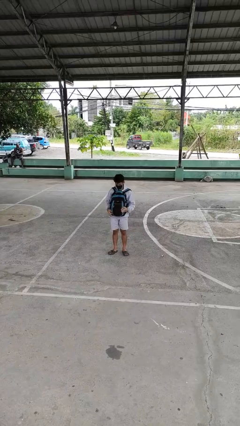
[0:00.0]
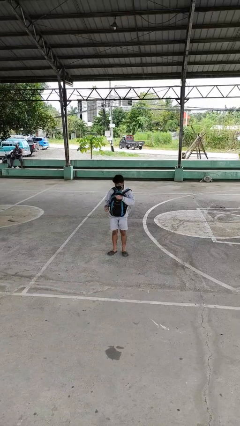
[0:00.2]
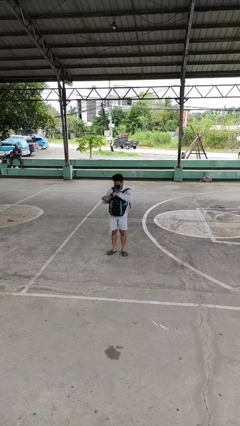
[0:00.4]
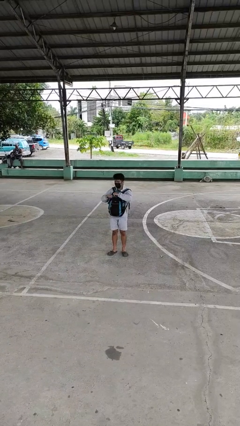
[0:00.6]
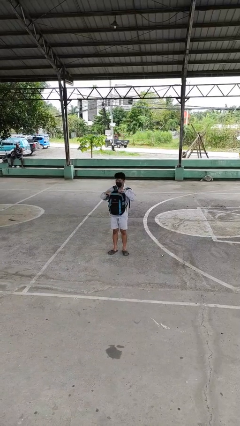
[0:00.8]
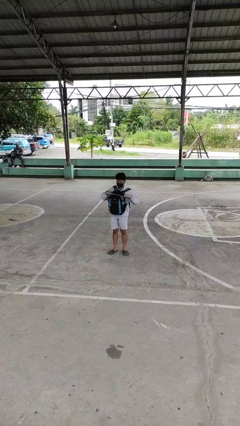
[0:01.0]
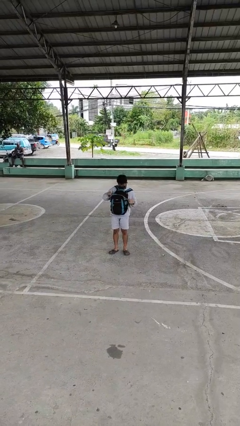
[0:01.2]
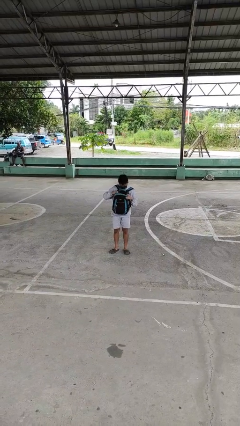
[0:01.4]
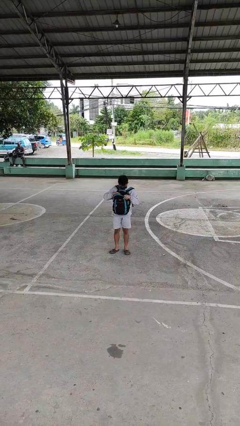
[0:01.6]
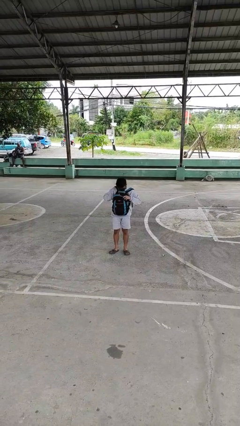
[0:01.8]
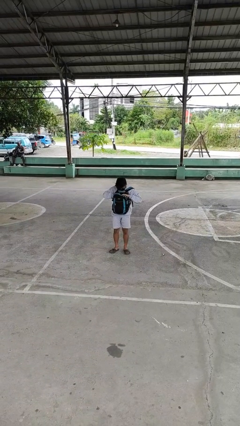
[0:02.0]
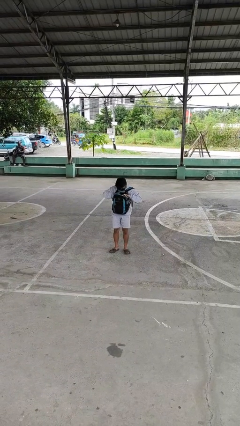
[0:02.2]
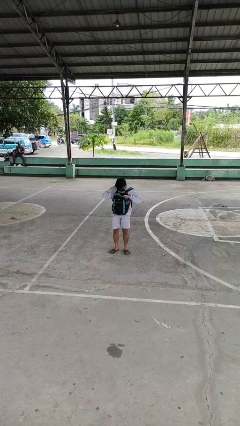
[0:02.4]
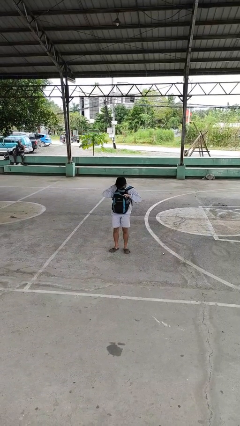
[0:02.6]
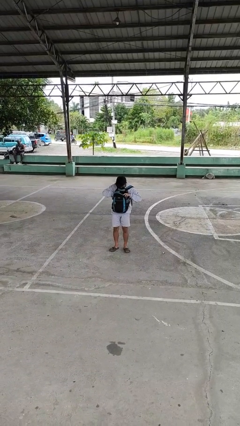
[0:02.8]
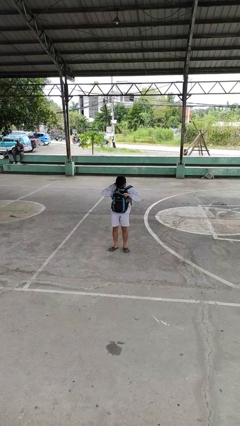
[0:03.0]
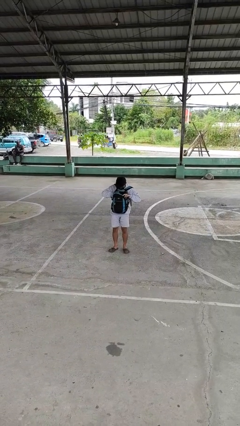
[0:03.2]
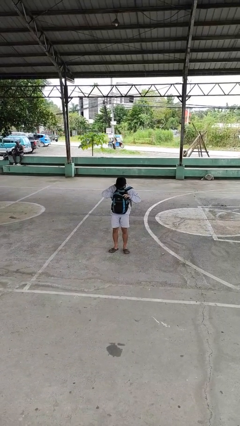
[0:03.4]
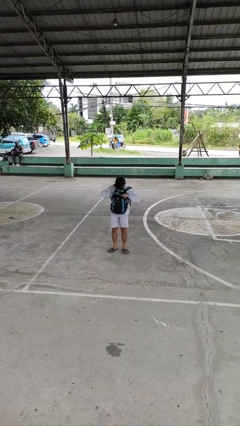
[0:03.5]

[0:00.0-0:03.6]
person searches in backpack

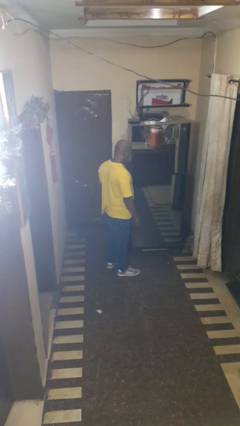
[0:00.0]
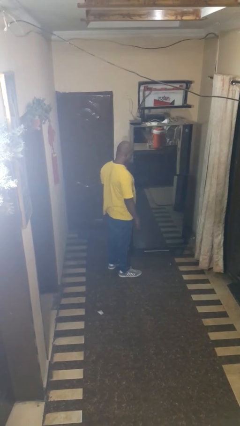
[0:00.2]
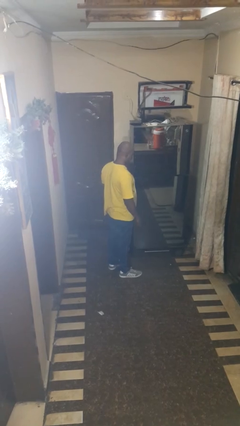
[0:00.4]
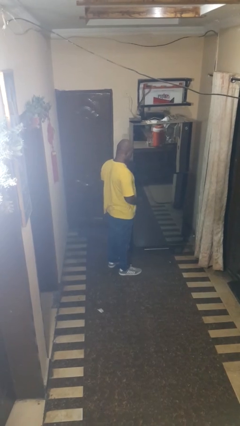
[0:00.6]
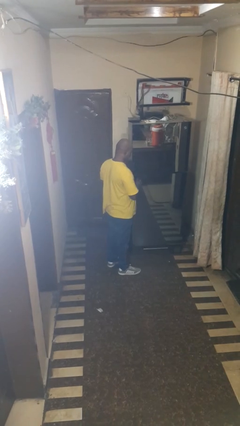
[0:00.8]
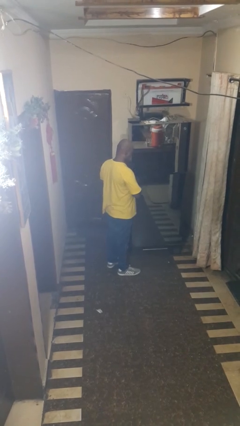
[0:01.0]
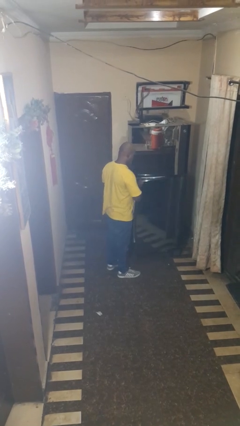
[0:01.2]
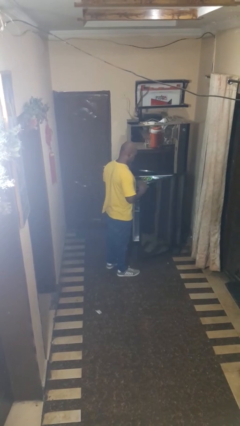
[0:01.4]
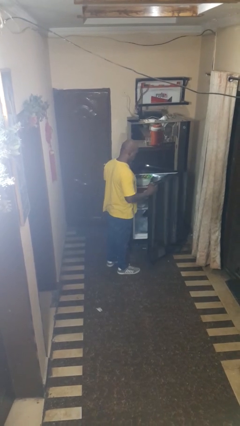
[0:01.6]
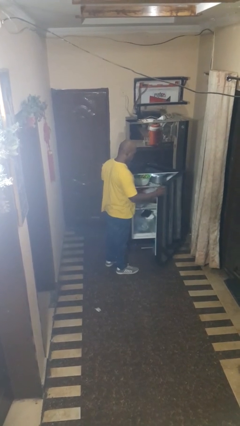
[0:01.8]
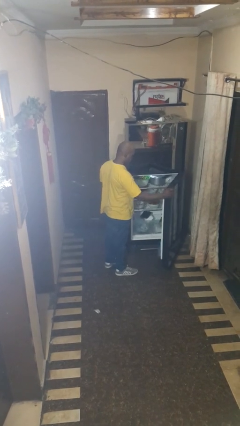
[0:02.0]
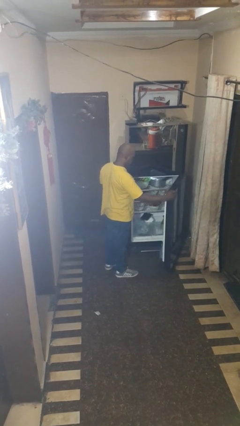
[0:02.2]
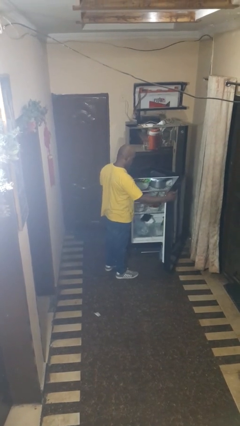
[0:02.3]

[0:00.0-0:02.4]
person opens refrigerator

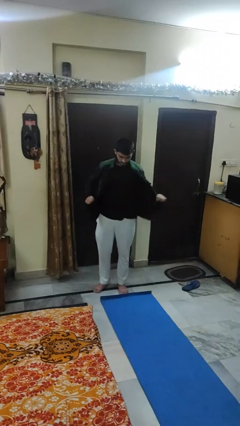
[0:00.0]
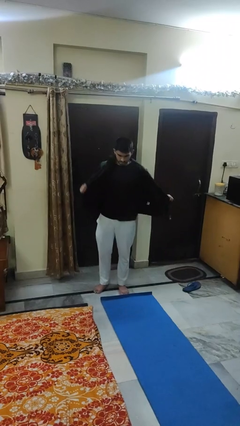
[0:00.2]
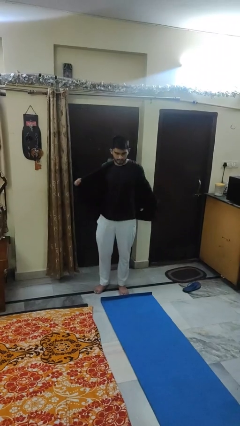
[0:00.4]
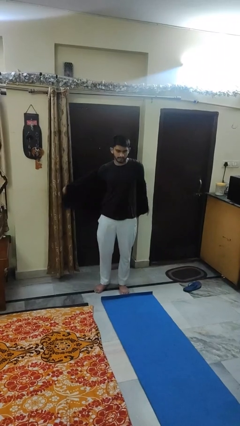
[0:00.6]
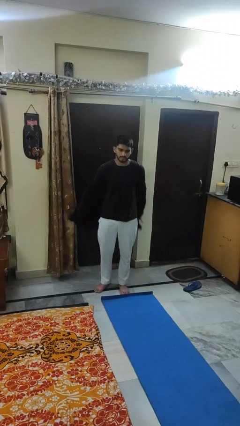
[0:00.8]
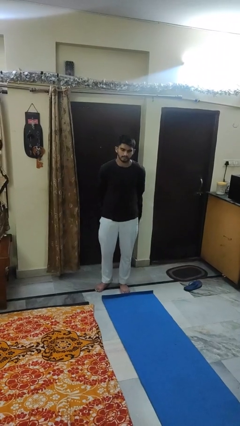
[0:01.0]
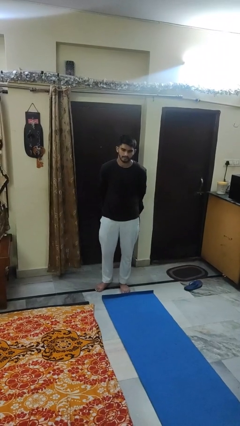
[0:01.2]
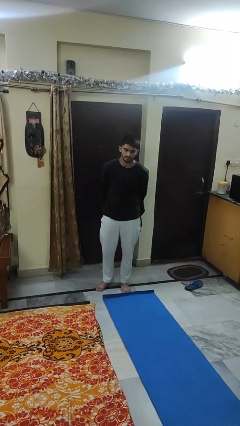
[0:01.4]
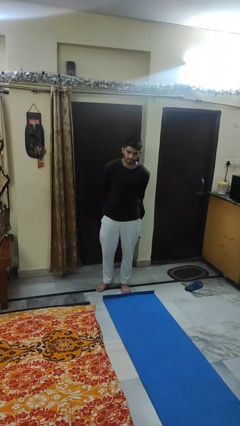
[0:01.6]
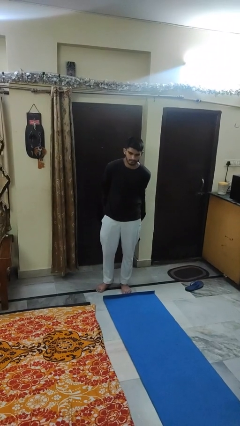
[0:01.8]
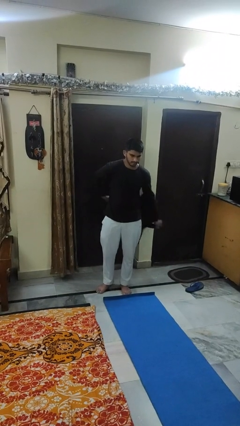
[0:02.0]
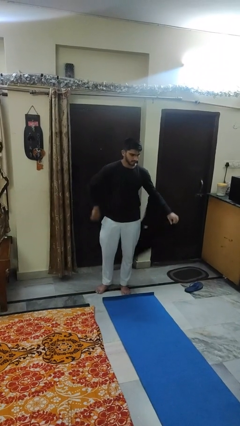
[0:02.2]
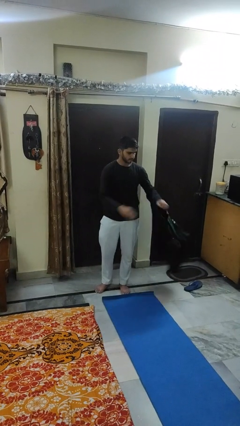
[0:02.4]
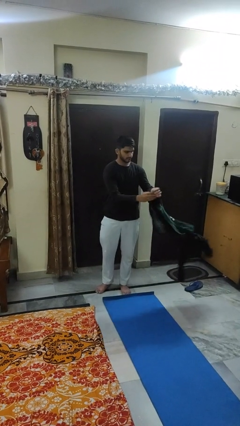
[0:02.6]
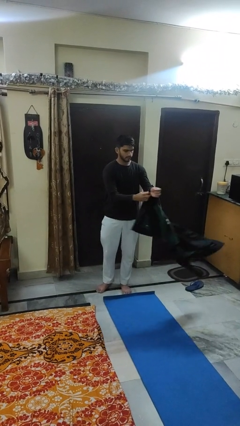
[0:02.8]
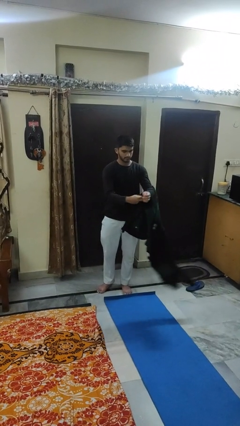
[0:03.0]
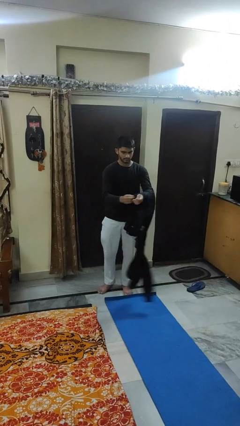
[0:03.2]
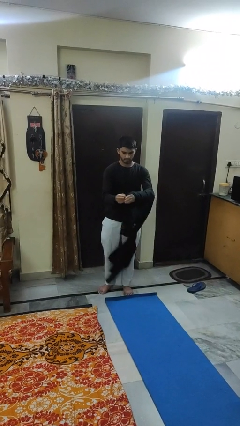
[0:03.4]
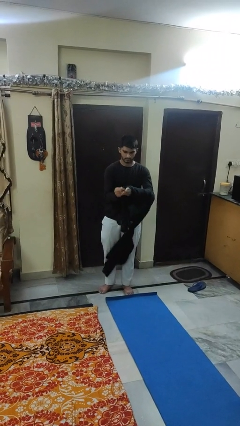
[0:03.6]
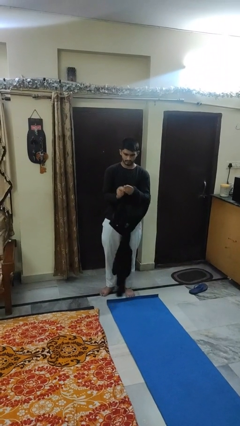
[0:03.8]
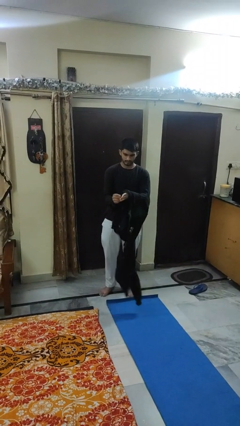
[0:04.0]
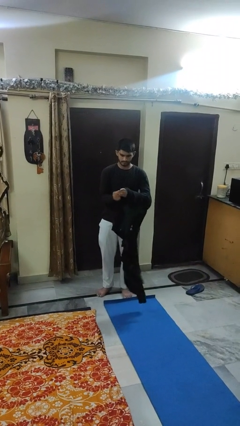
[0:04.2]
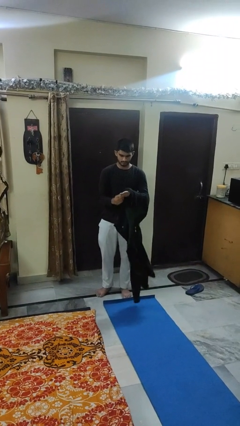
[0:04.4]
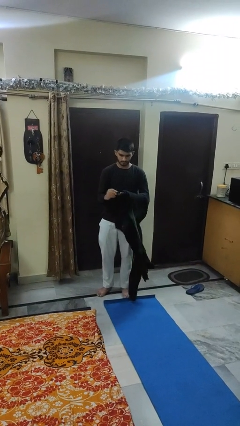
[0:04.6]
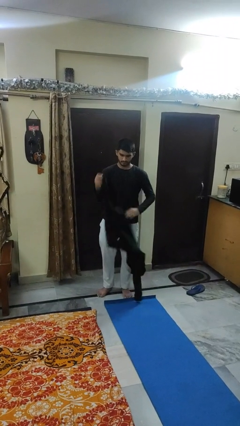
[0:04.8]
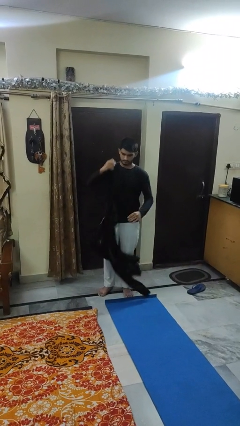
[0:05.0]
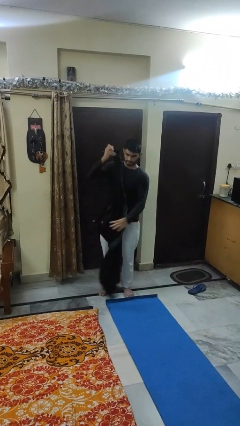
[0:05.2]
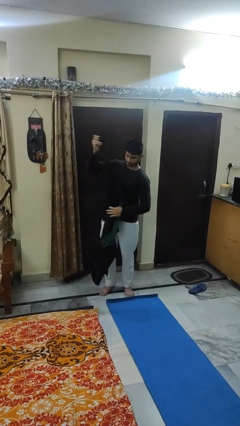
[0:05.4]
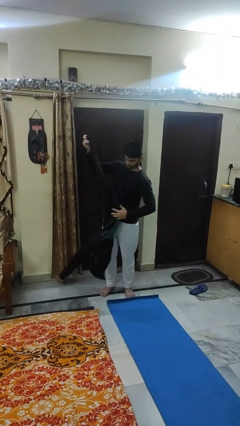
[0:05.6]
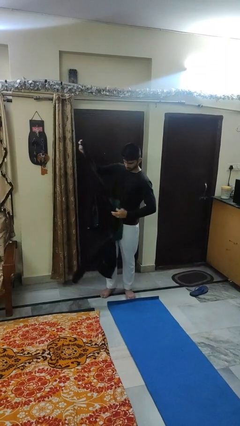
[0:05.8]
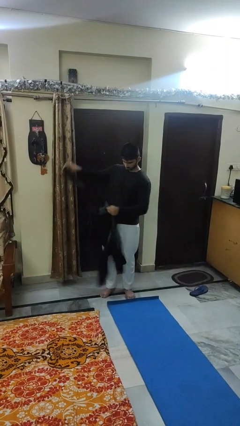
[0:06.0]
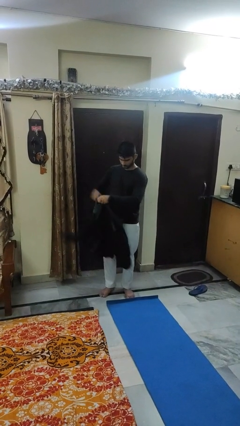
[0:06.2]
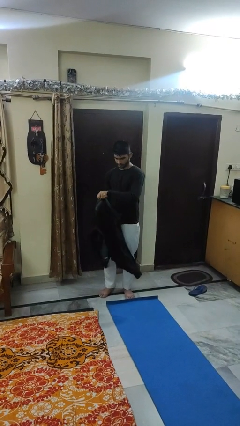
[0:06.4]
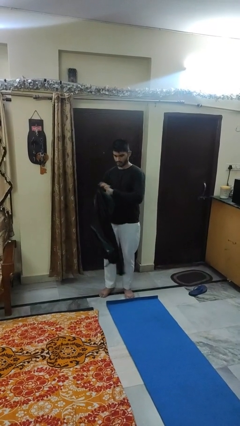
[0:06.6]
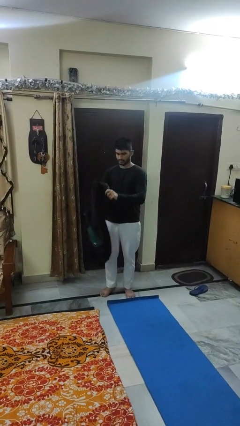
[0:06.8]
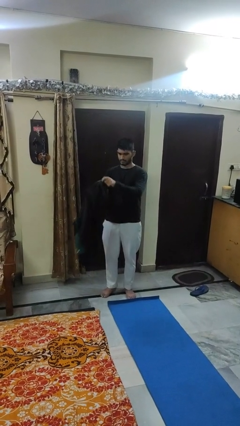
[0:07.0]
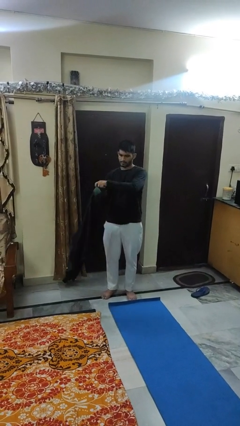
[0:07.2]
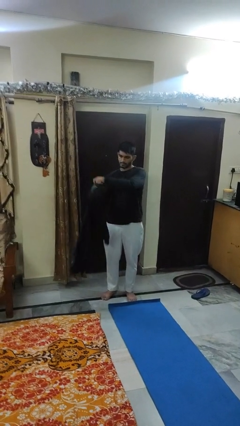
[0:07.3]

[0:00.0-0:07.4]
person takes off jacket

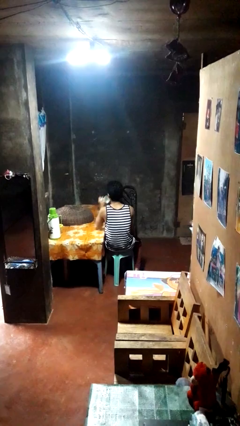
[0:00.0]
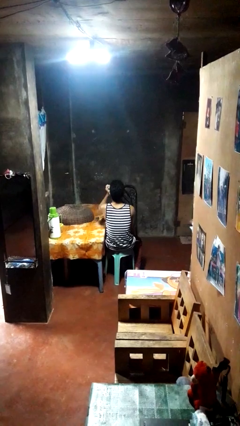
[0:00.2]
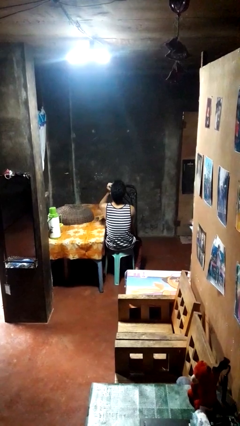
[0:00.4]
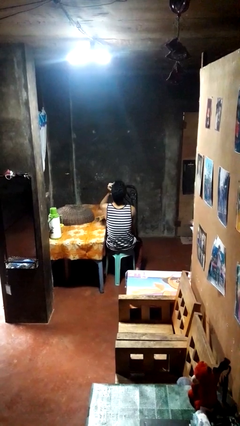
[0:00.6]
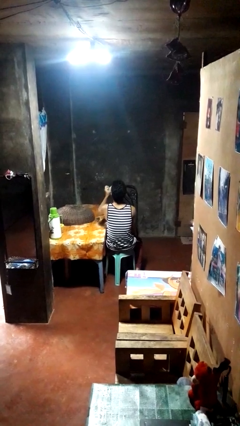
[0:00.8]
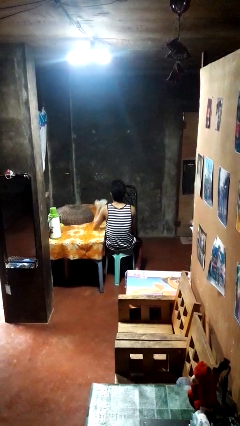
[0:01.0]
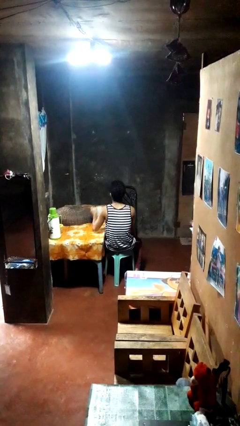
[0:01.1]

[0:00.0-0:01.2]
person drinks from mug

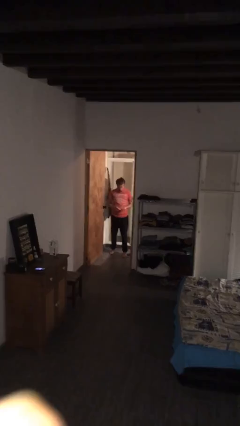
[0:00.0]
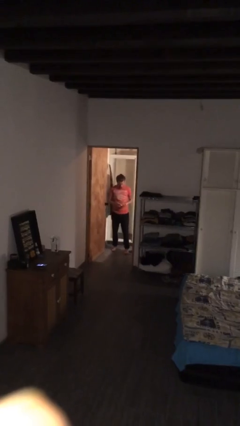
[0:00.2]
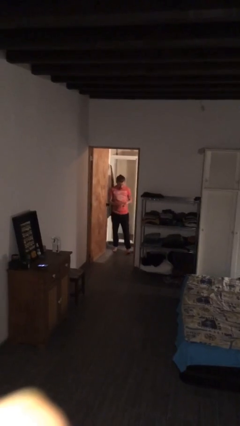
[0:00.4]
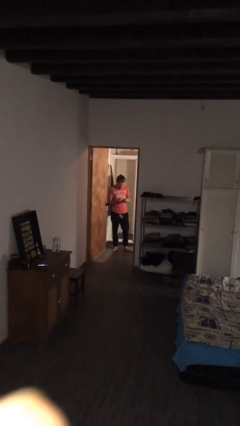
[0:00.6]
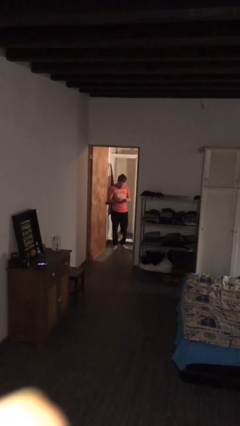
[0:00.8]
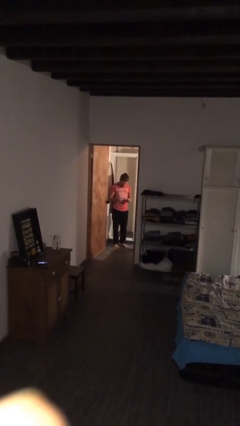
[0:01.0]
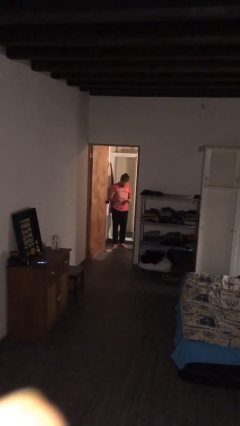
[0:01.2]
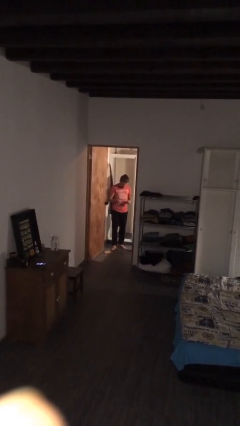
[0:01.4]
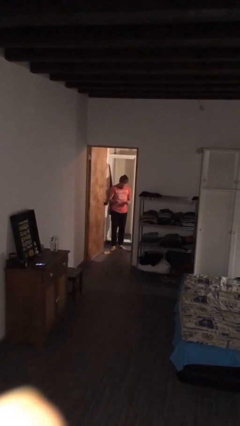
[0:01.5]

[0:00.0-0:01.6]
person drops object

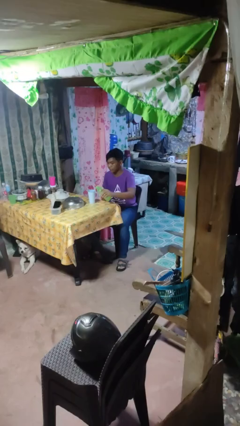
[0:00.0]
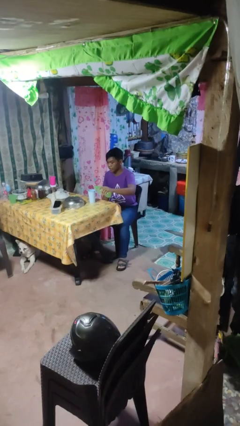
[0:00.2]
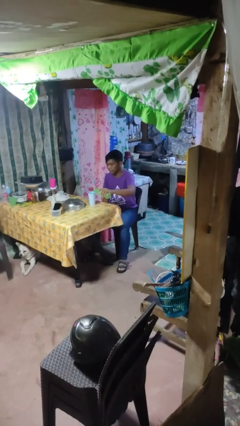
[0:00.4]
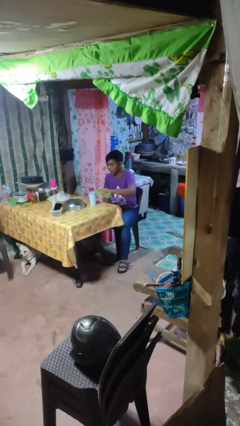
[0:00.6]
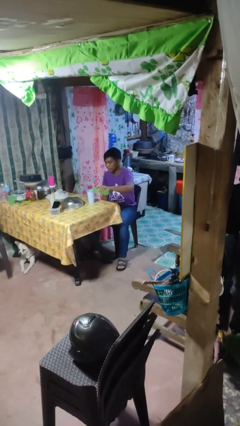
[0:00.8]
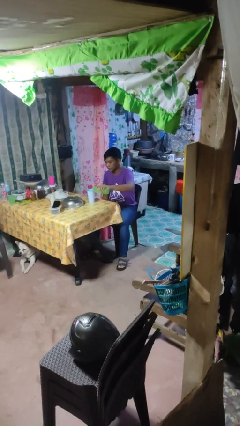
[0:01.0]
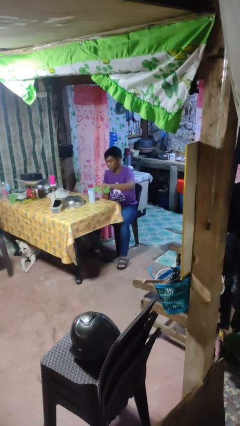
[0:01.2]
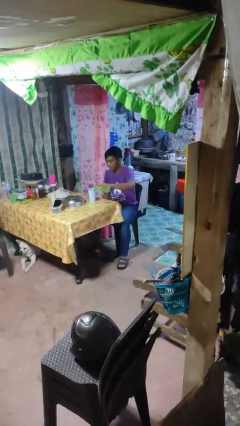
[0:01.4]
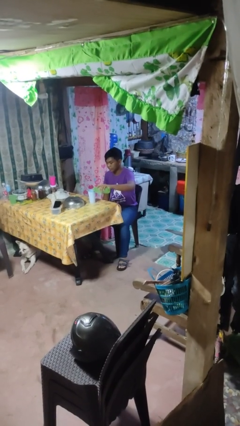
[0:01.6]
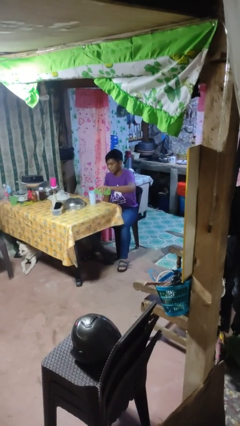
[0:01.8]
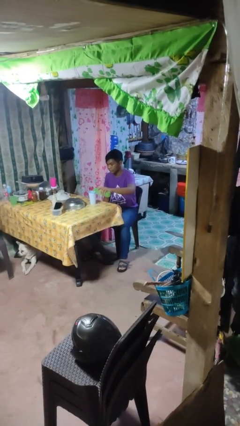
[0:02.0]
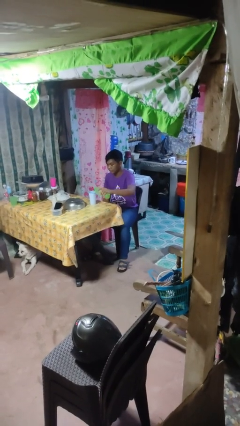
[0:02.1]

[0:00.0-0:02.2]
person pours liquid into cup
